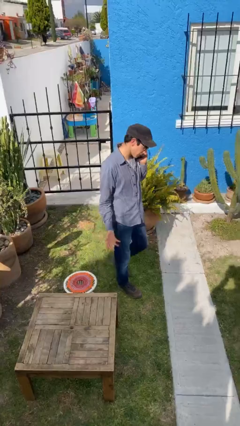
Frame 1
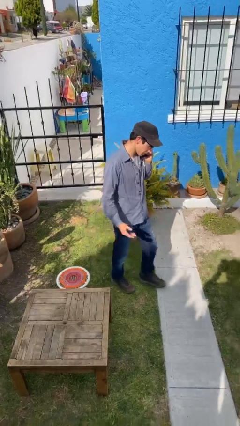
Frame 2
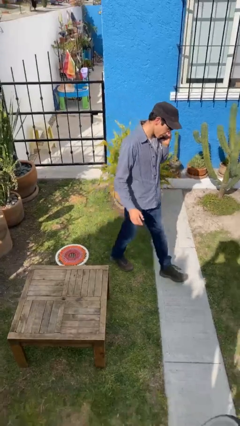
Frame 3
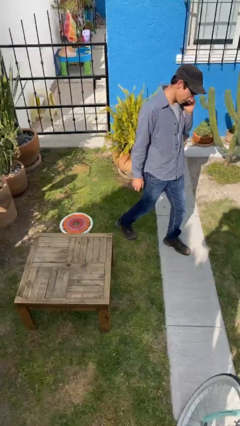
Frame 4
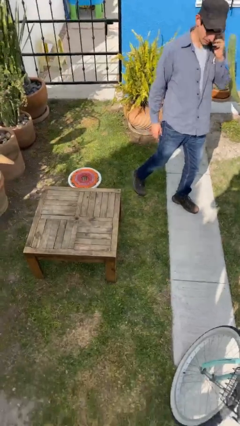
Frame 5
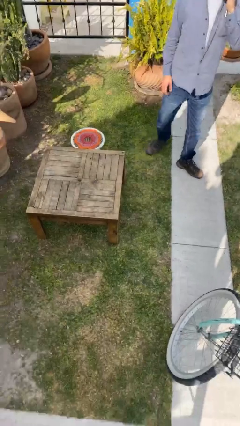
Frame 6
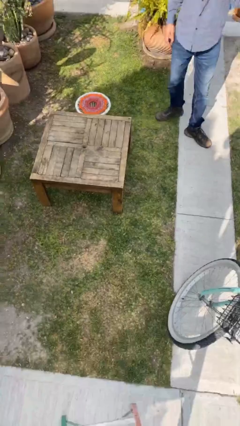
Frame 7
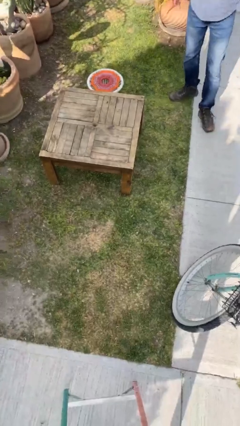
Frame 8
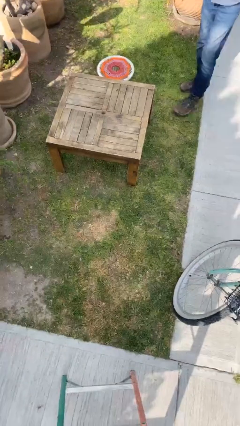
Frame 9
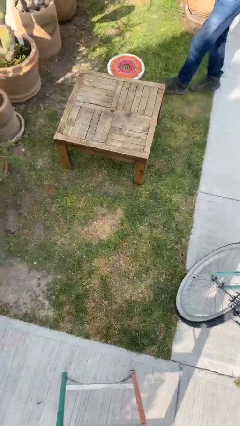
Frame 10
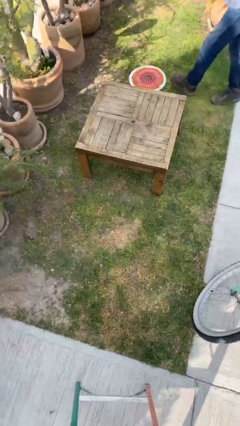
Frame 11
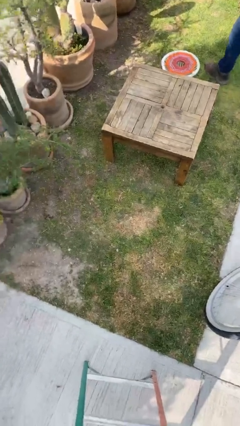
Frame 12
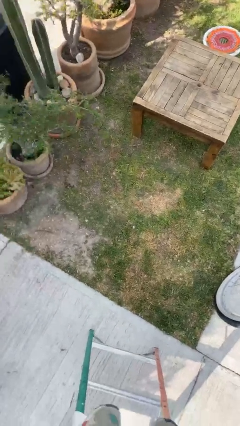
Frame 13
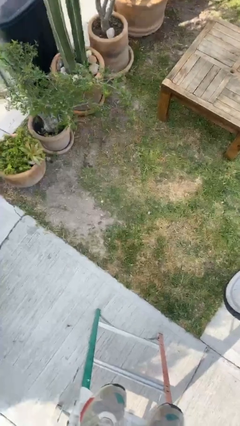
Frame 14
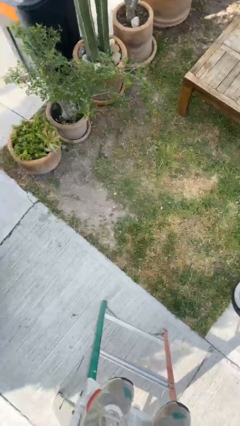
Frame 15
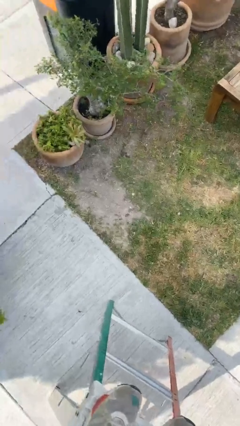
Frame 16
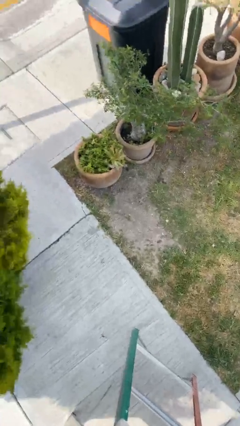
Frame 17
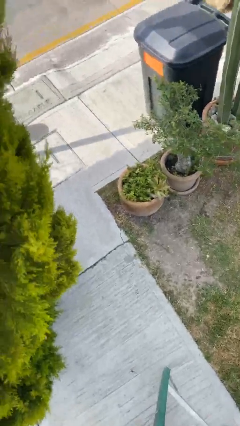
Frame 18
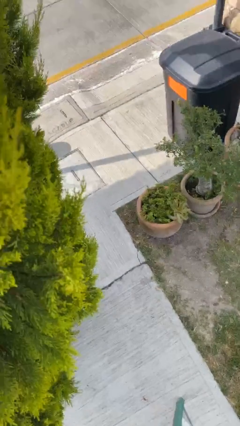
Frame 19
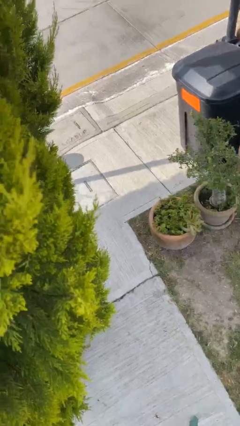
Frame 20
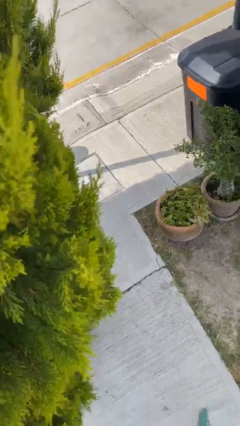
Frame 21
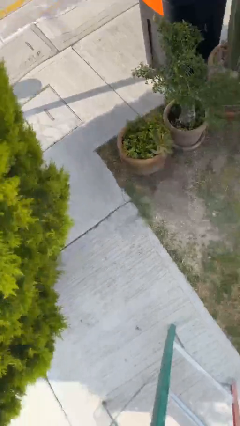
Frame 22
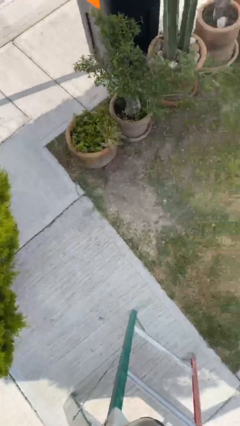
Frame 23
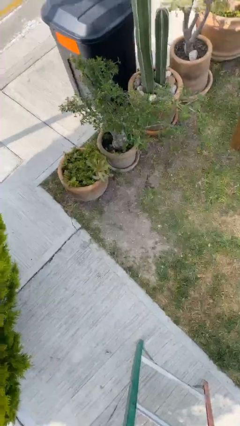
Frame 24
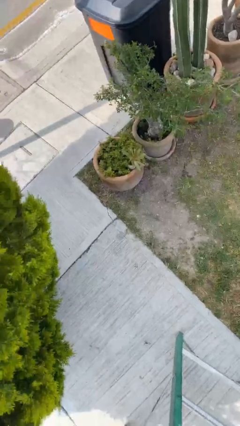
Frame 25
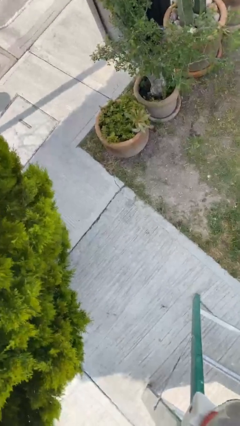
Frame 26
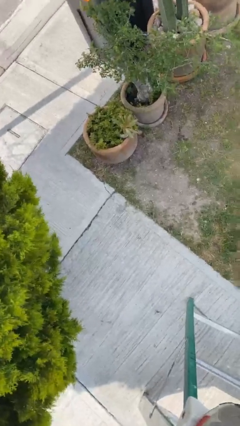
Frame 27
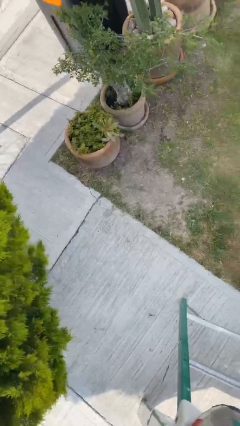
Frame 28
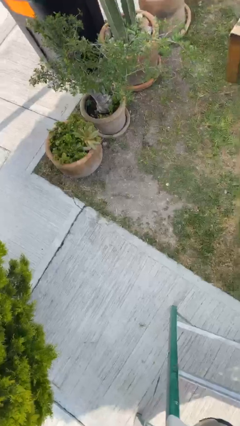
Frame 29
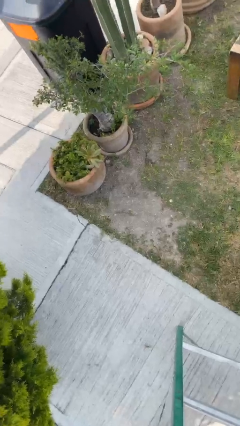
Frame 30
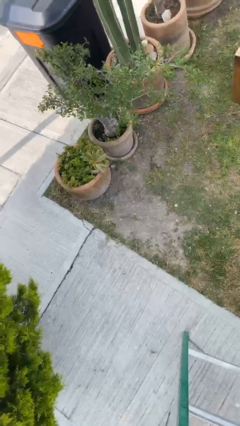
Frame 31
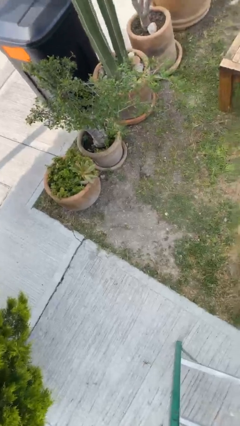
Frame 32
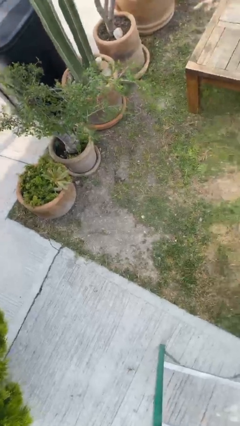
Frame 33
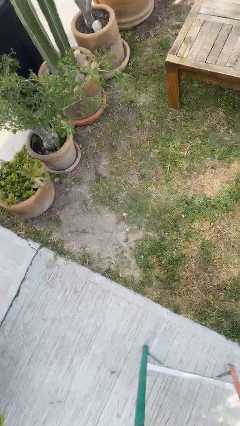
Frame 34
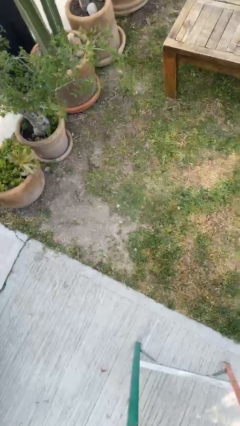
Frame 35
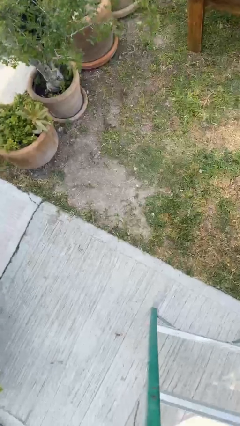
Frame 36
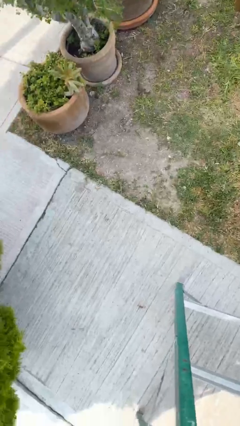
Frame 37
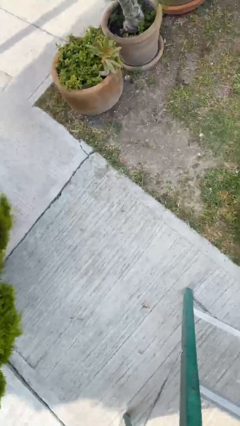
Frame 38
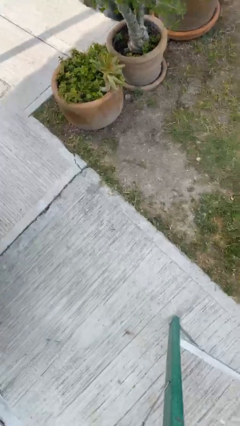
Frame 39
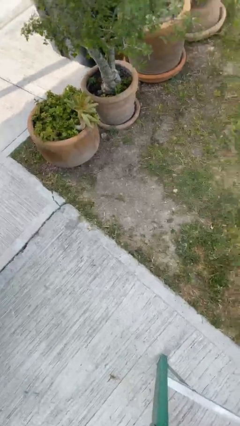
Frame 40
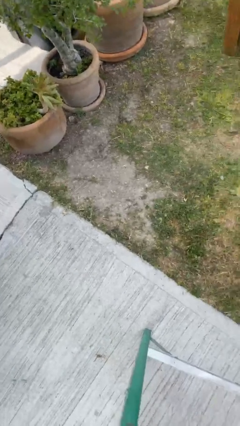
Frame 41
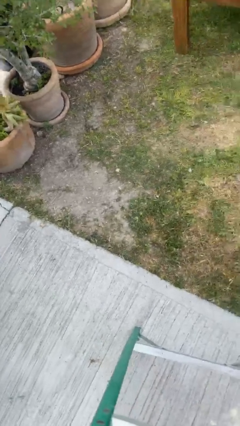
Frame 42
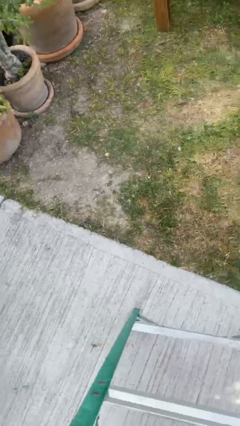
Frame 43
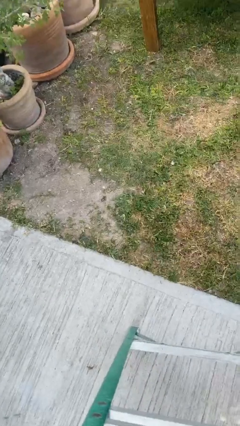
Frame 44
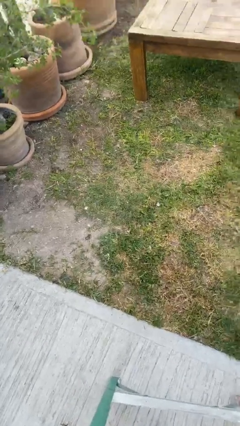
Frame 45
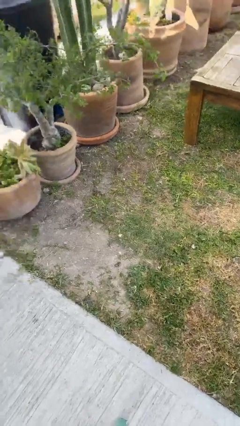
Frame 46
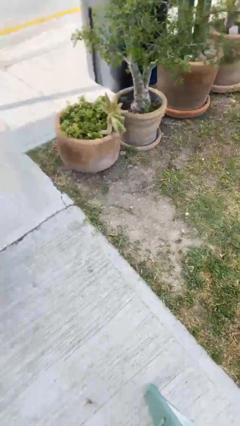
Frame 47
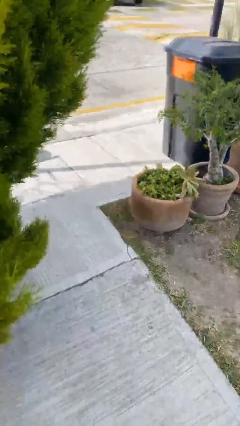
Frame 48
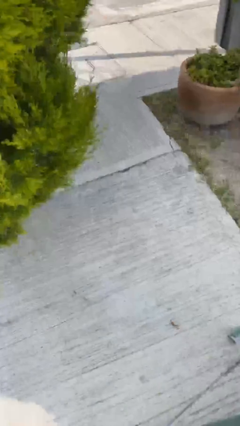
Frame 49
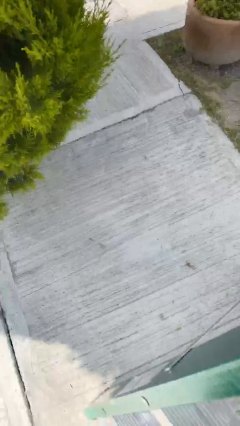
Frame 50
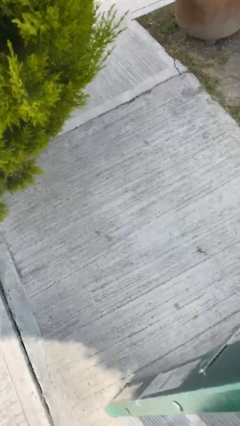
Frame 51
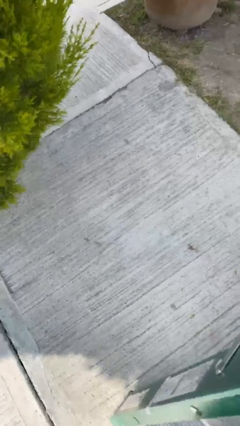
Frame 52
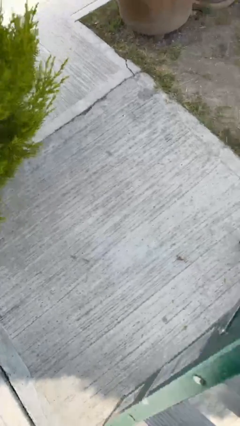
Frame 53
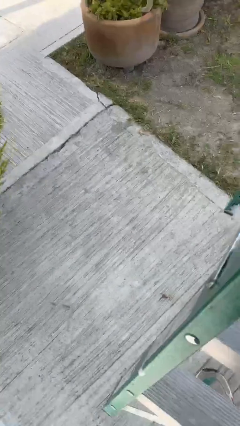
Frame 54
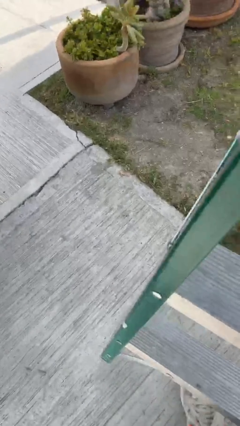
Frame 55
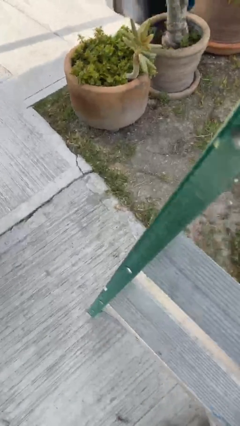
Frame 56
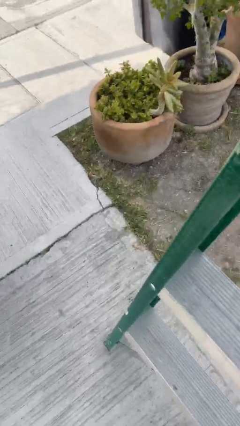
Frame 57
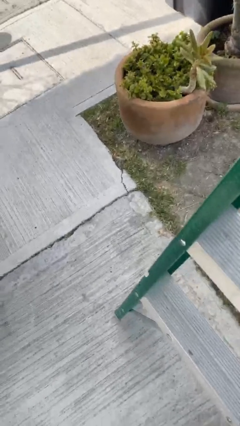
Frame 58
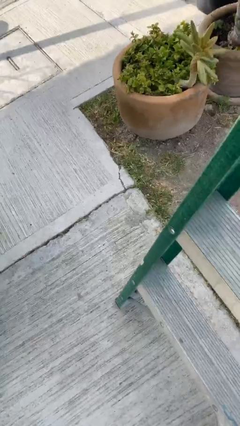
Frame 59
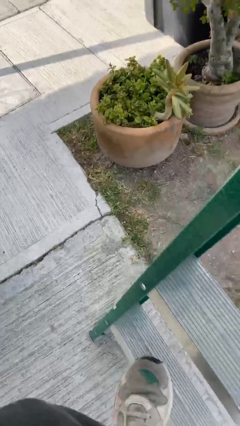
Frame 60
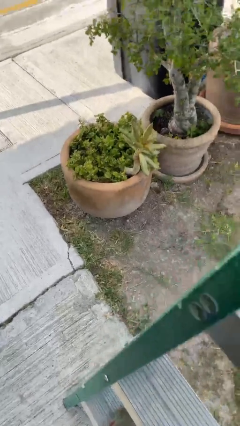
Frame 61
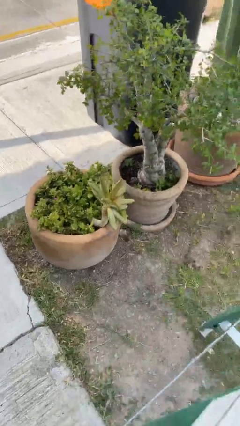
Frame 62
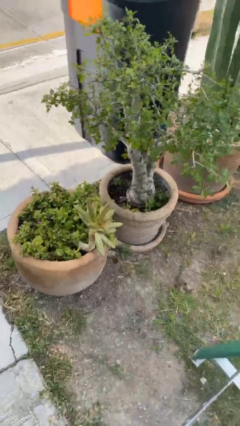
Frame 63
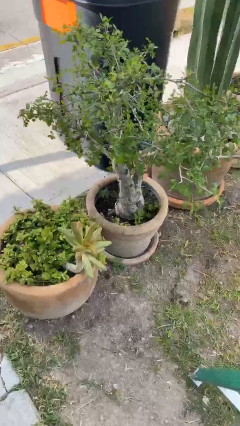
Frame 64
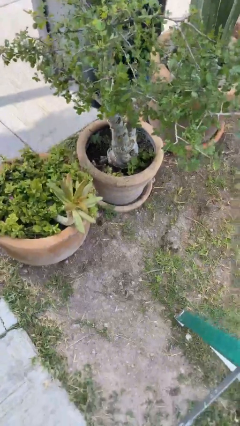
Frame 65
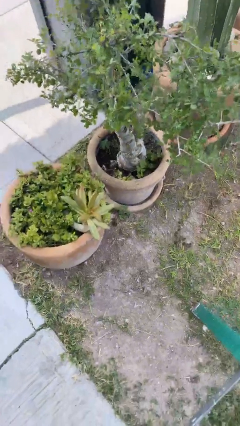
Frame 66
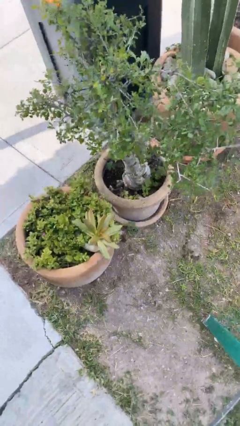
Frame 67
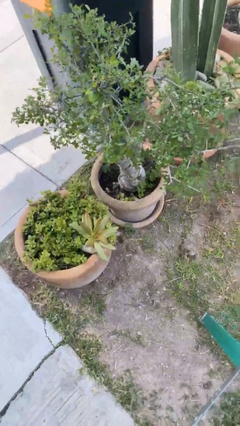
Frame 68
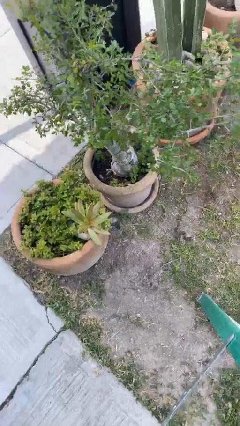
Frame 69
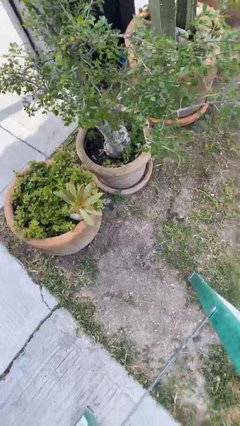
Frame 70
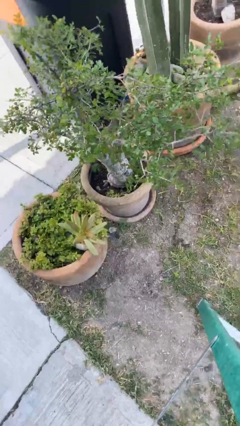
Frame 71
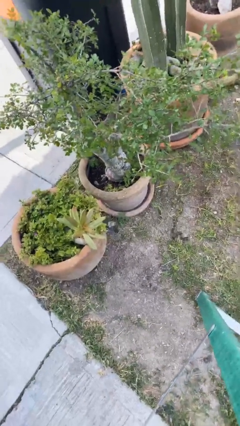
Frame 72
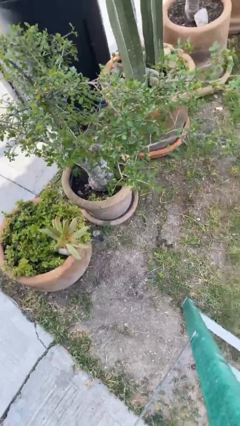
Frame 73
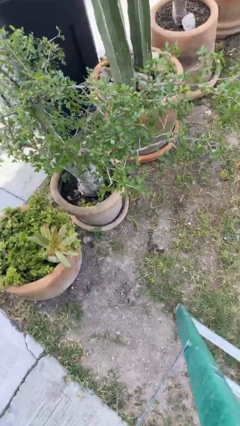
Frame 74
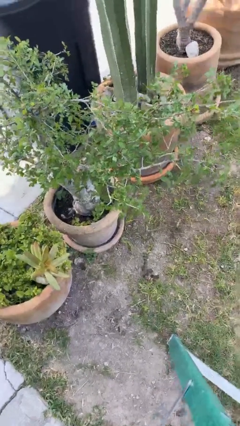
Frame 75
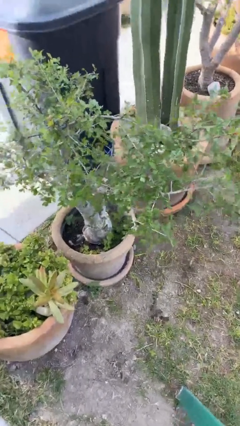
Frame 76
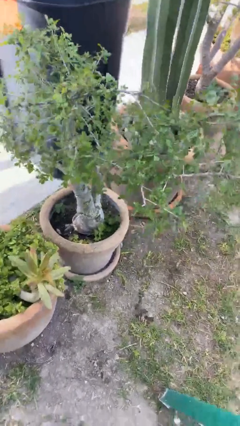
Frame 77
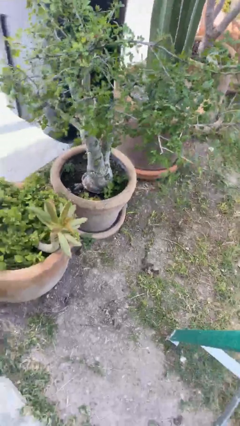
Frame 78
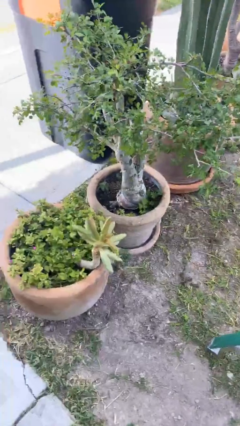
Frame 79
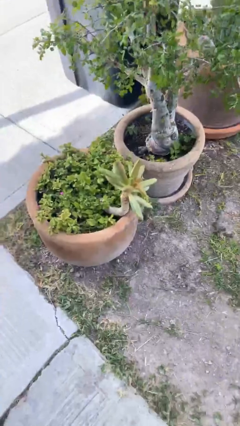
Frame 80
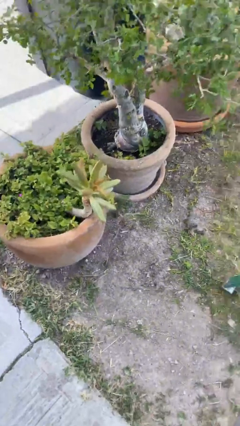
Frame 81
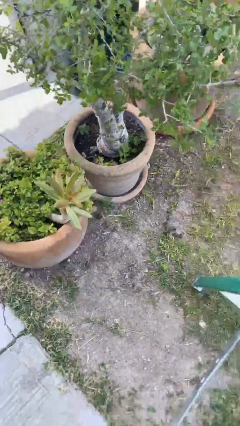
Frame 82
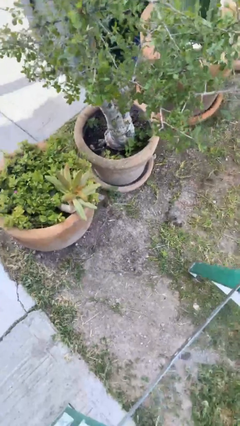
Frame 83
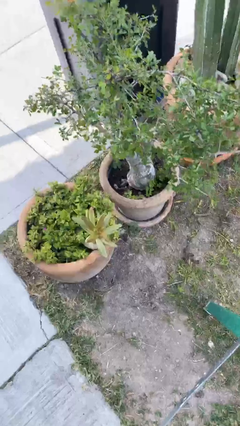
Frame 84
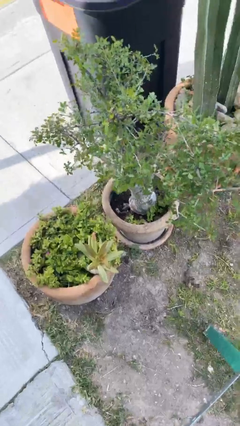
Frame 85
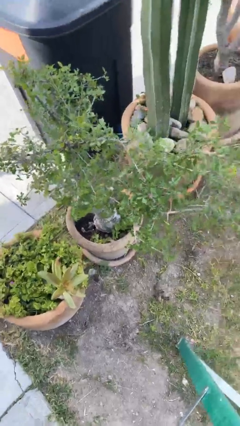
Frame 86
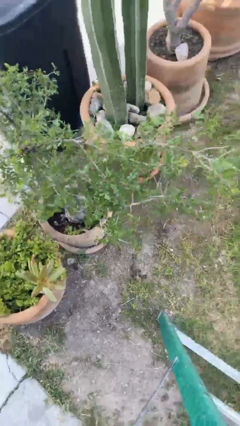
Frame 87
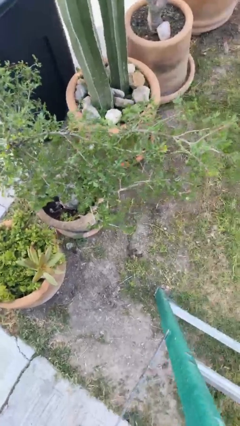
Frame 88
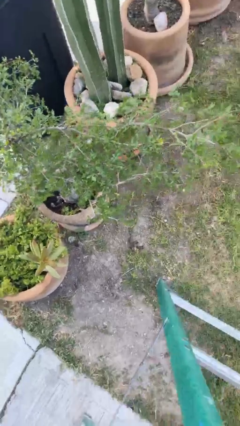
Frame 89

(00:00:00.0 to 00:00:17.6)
person opens facility door

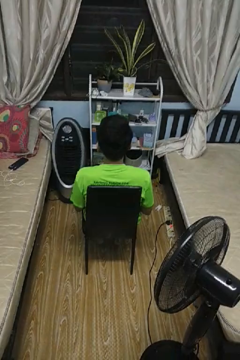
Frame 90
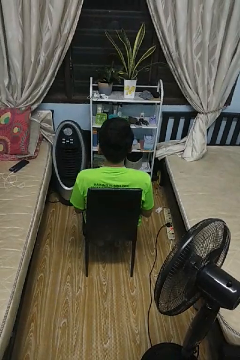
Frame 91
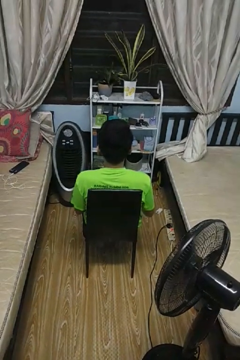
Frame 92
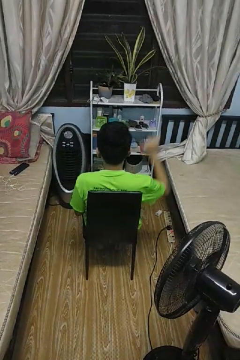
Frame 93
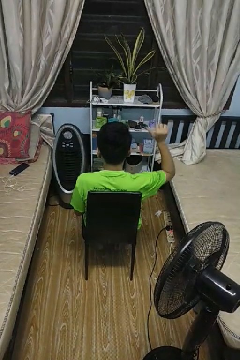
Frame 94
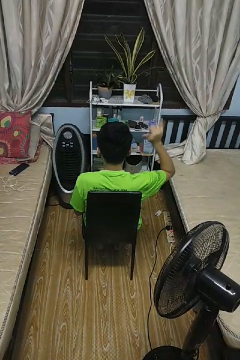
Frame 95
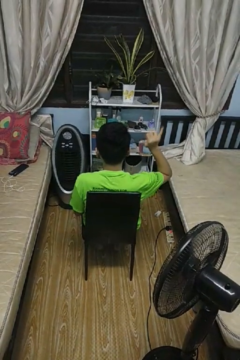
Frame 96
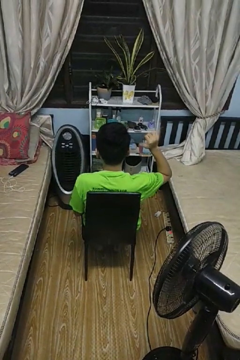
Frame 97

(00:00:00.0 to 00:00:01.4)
person gestures hang loose
